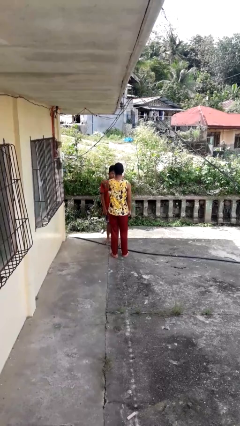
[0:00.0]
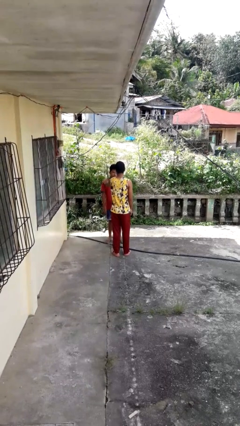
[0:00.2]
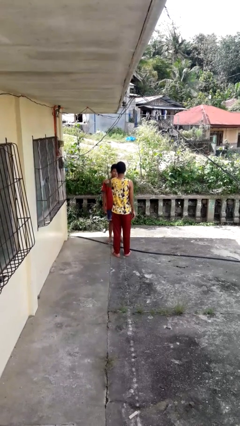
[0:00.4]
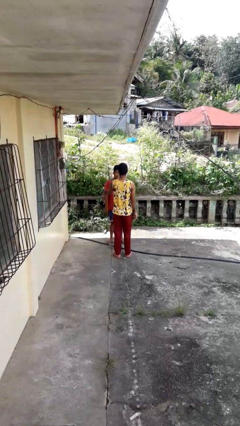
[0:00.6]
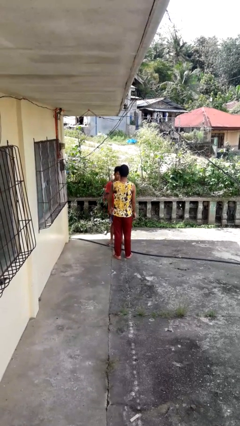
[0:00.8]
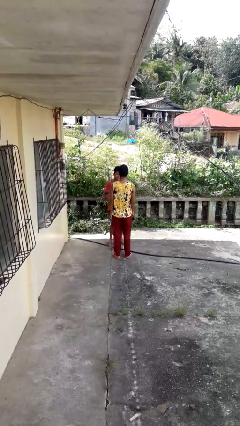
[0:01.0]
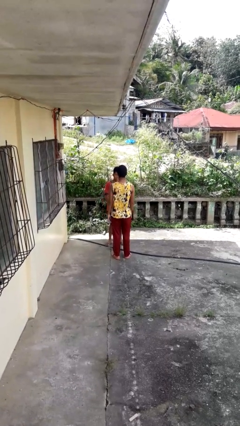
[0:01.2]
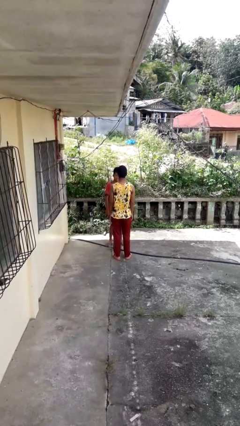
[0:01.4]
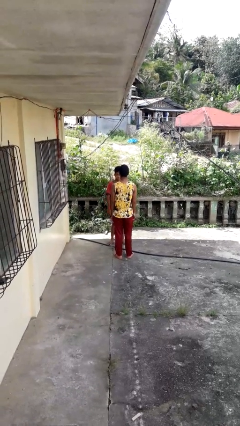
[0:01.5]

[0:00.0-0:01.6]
person shoves person

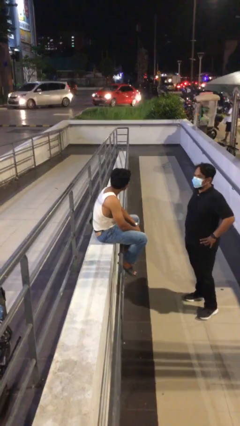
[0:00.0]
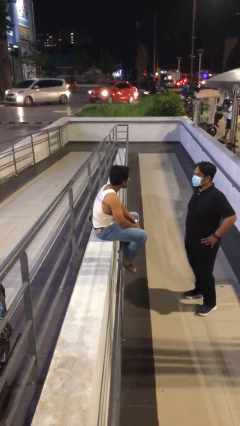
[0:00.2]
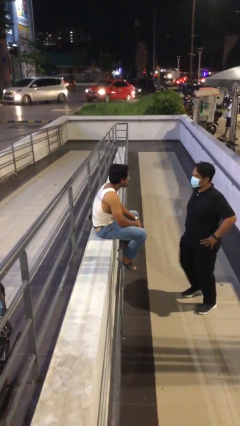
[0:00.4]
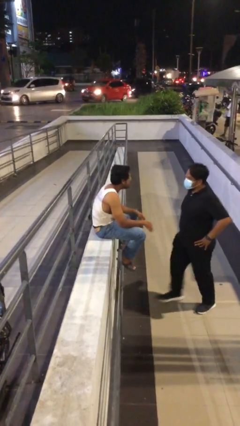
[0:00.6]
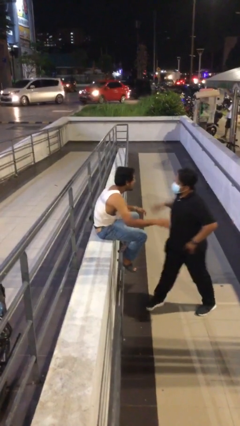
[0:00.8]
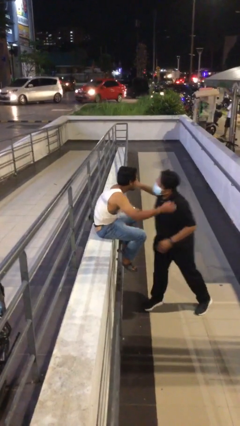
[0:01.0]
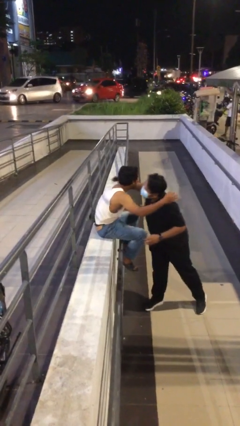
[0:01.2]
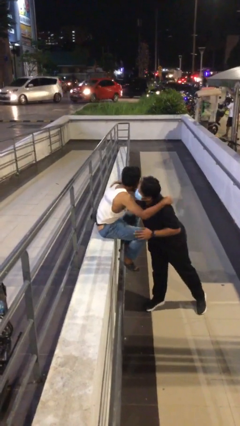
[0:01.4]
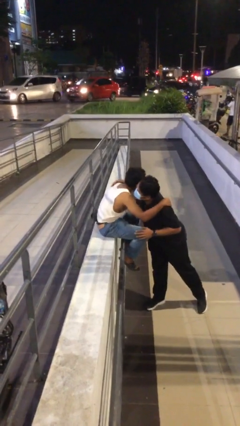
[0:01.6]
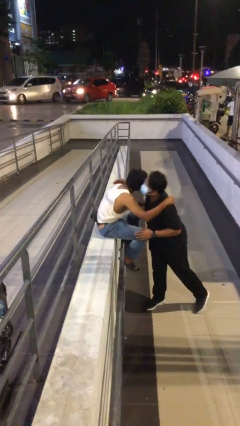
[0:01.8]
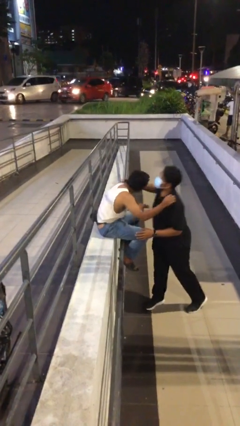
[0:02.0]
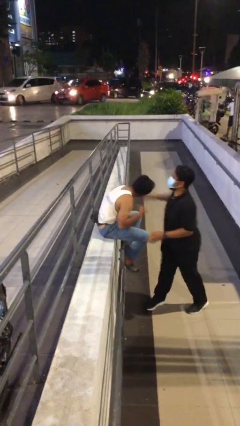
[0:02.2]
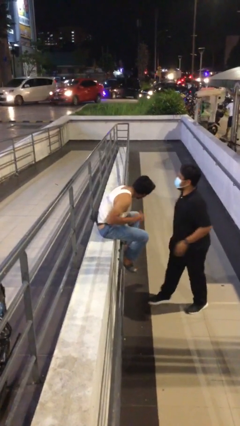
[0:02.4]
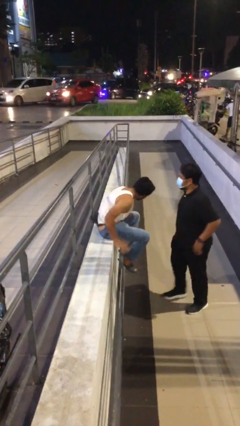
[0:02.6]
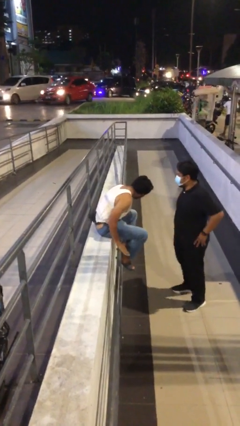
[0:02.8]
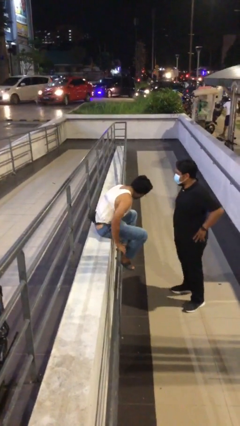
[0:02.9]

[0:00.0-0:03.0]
person embraces person

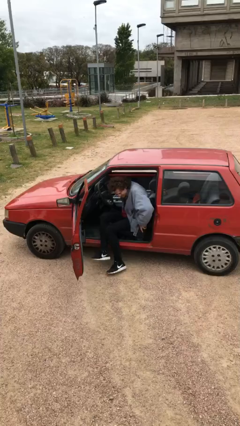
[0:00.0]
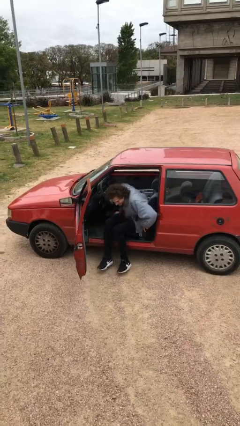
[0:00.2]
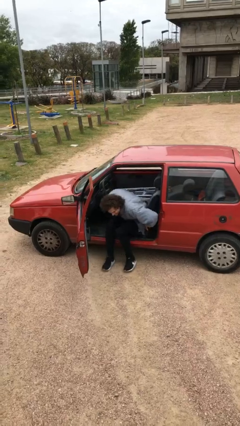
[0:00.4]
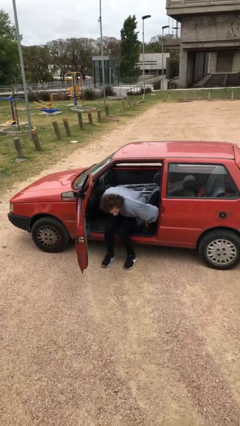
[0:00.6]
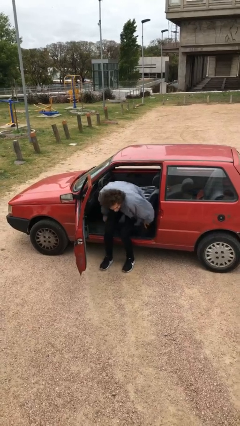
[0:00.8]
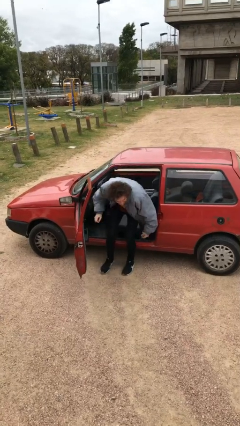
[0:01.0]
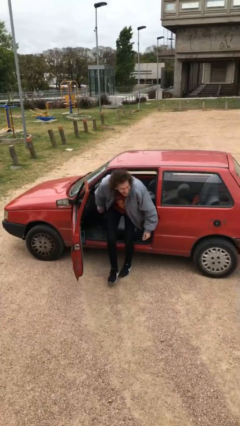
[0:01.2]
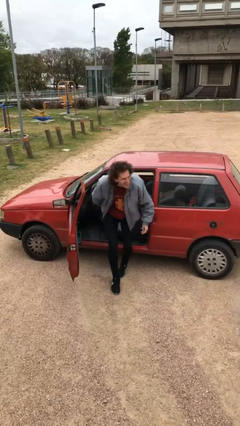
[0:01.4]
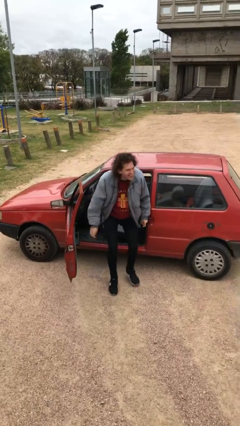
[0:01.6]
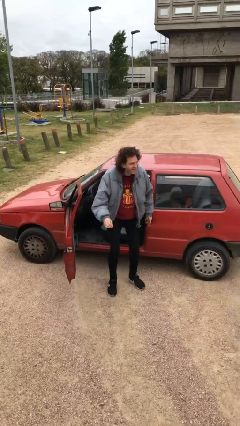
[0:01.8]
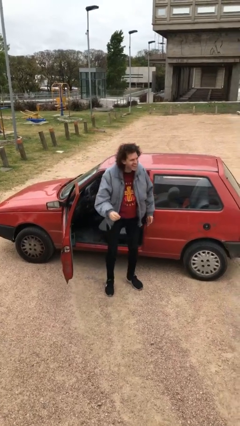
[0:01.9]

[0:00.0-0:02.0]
person exits car

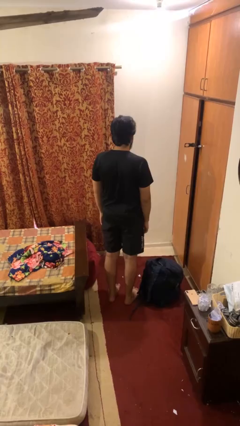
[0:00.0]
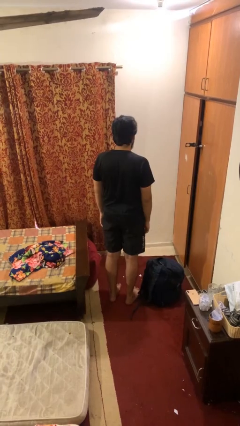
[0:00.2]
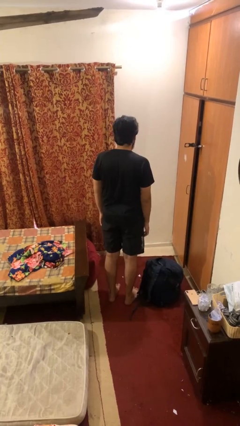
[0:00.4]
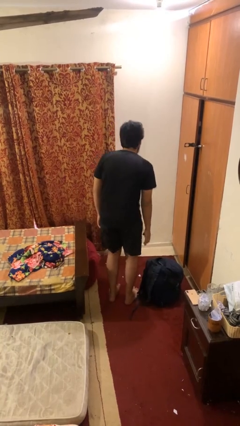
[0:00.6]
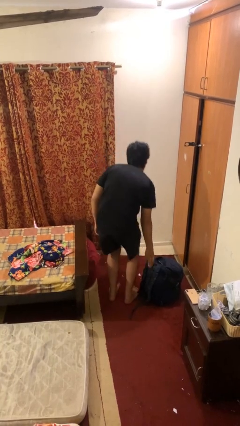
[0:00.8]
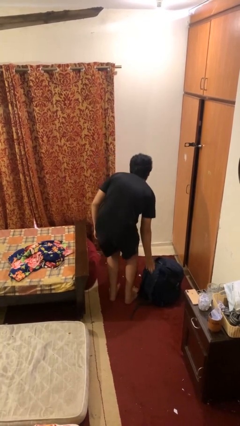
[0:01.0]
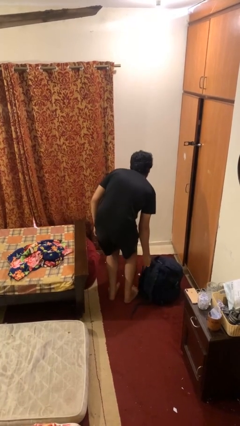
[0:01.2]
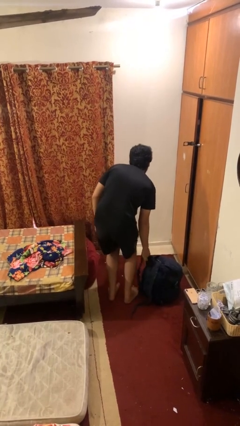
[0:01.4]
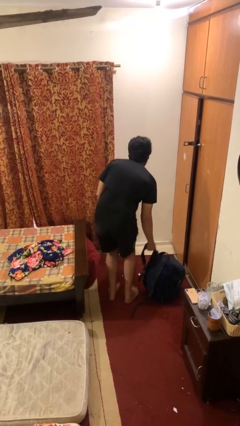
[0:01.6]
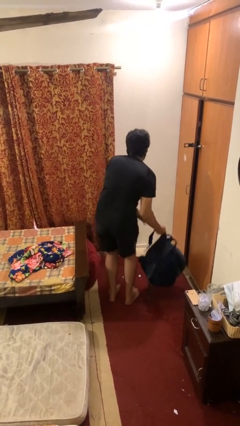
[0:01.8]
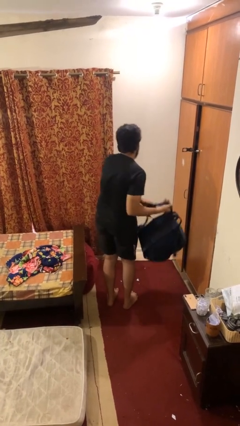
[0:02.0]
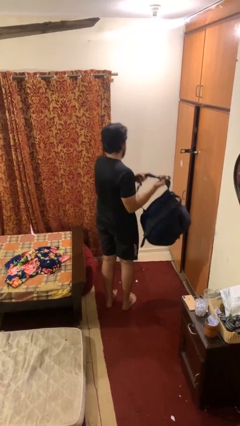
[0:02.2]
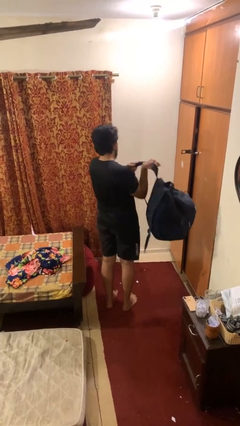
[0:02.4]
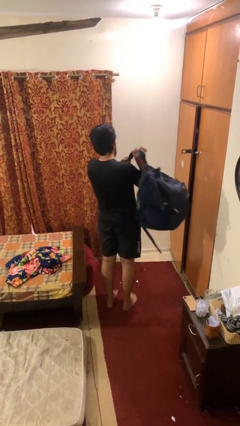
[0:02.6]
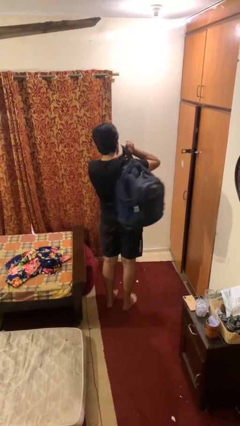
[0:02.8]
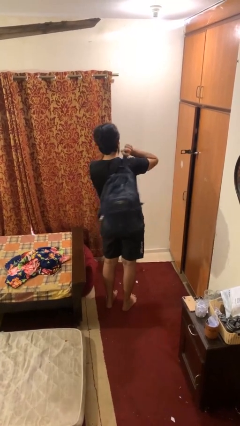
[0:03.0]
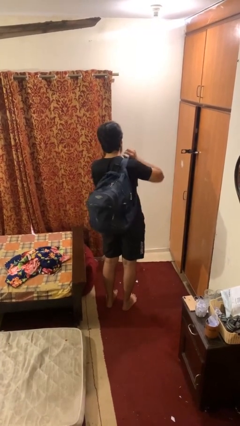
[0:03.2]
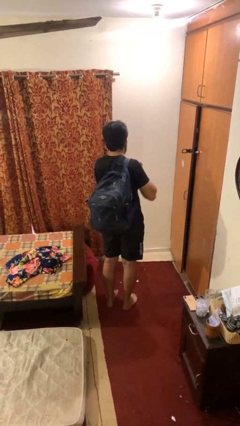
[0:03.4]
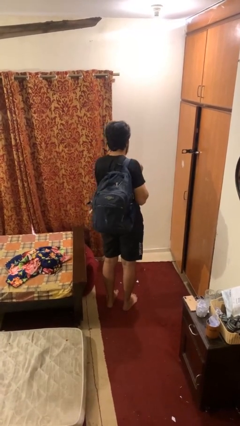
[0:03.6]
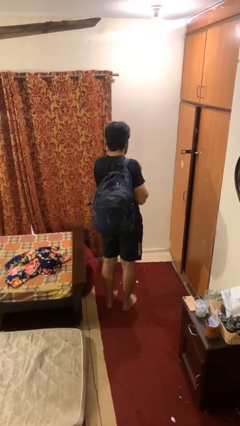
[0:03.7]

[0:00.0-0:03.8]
person puts on backpack

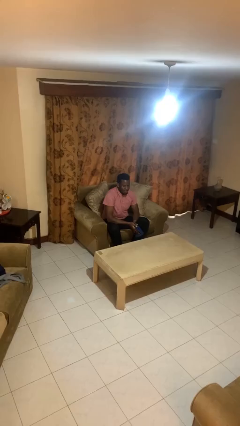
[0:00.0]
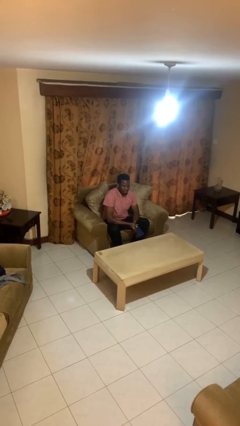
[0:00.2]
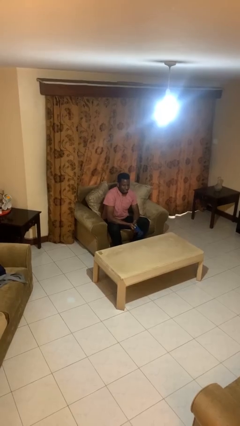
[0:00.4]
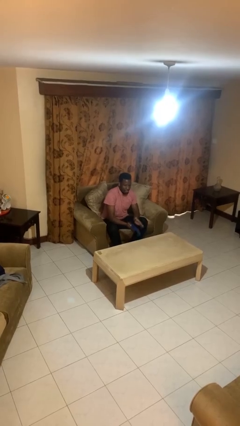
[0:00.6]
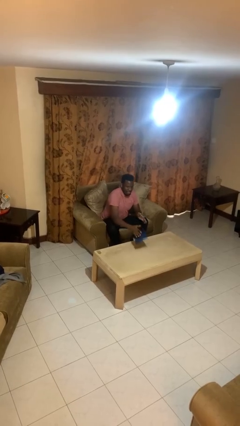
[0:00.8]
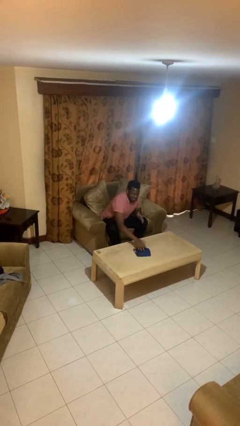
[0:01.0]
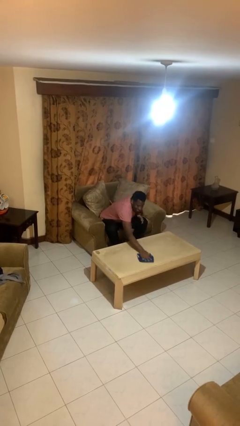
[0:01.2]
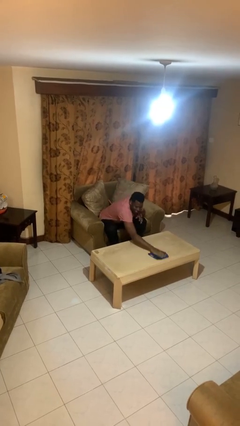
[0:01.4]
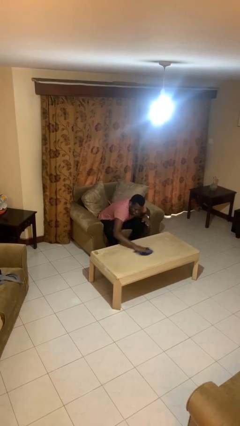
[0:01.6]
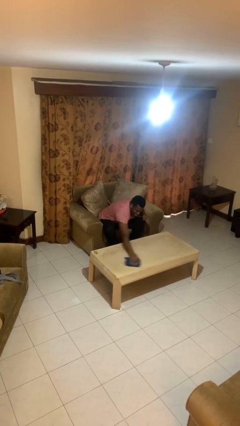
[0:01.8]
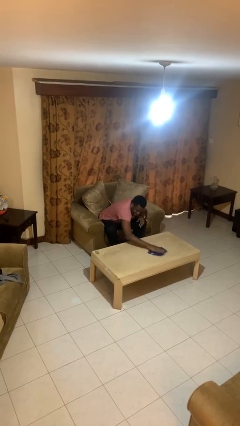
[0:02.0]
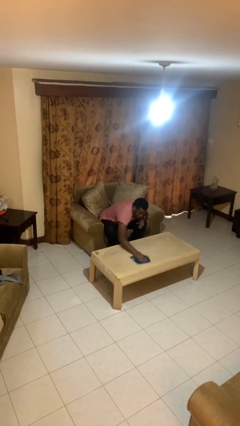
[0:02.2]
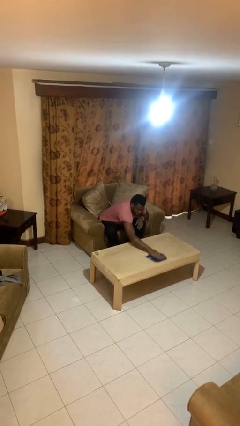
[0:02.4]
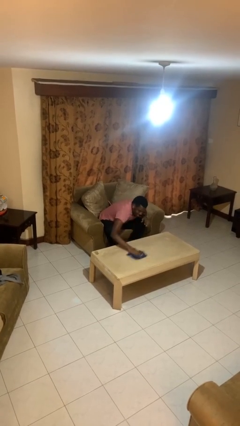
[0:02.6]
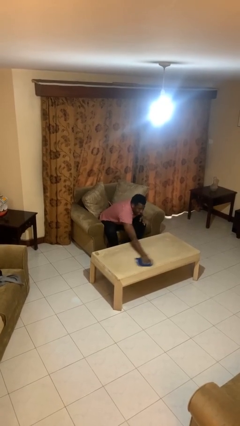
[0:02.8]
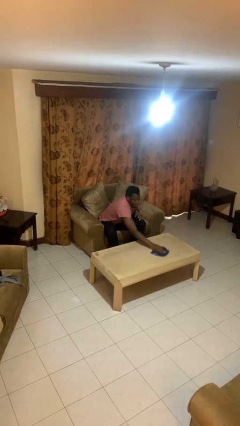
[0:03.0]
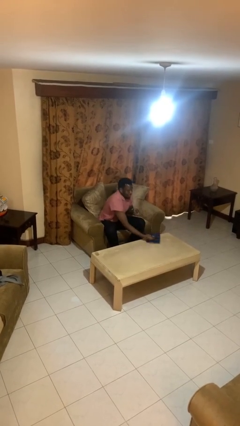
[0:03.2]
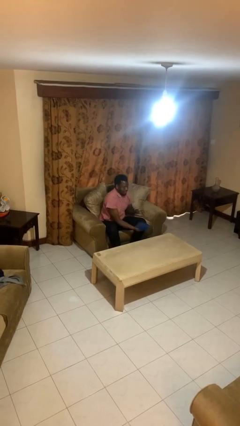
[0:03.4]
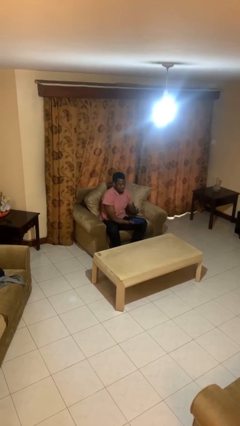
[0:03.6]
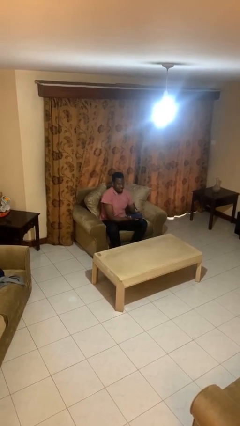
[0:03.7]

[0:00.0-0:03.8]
person cleans table with rag

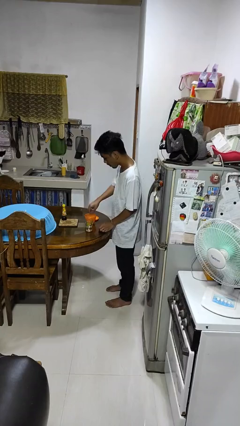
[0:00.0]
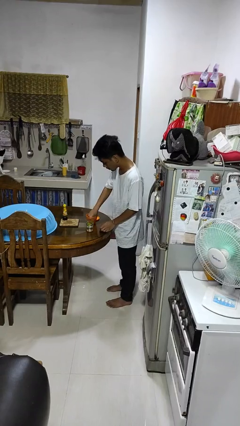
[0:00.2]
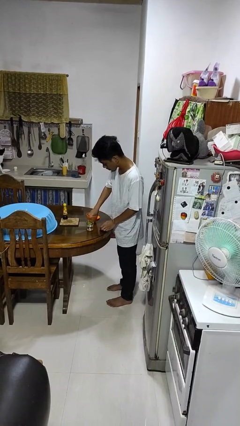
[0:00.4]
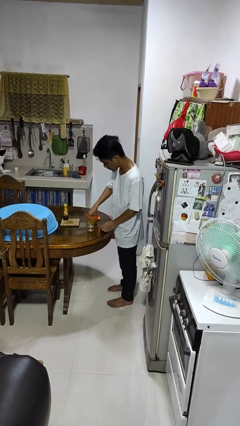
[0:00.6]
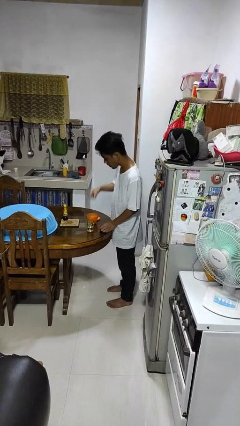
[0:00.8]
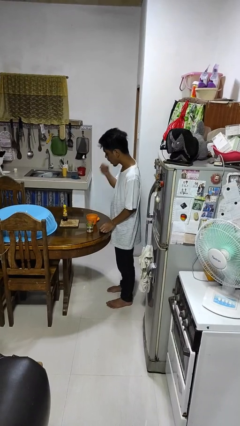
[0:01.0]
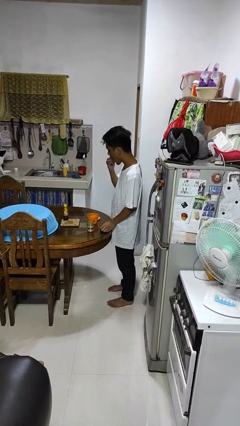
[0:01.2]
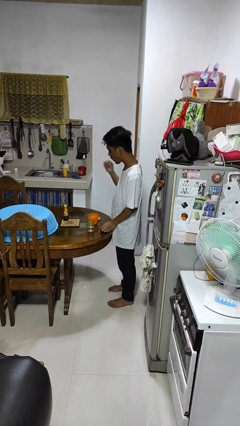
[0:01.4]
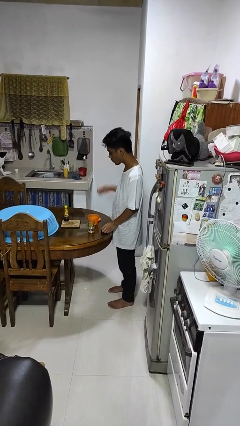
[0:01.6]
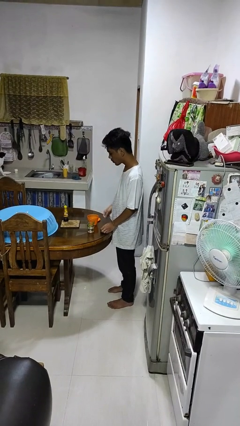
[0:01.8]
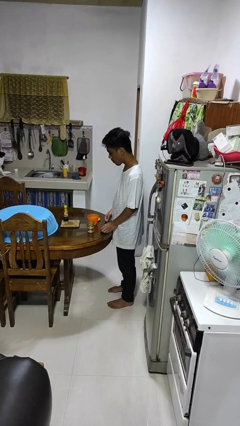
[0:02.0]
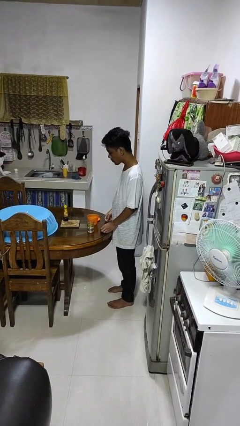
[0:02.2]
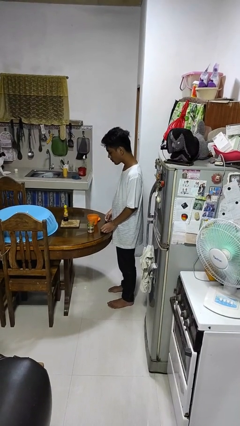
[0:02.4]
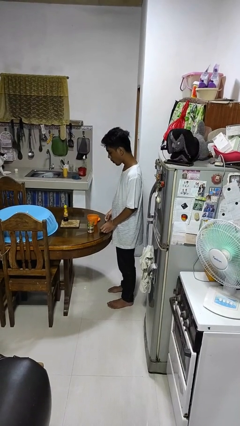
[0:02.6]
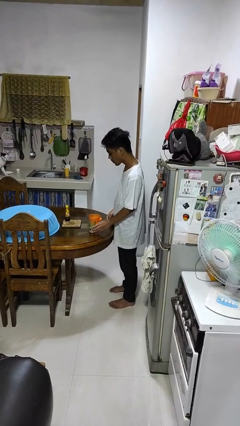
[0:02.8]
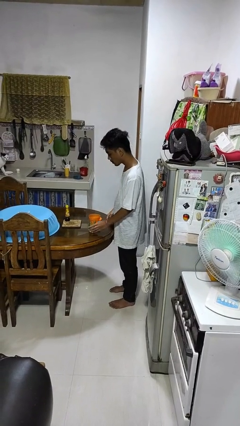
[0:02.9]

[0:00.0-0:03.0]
person takes medicine pills

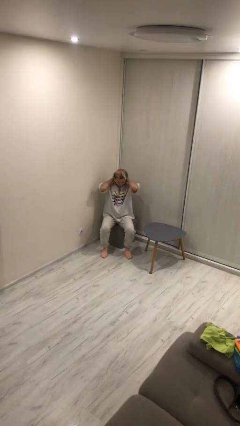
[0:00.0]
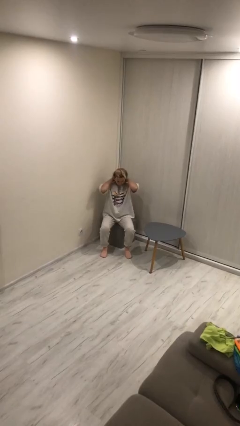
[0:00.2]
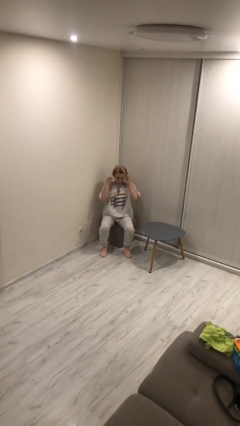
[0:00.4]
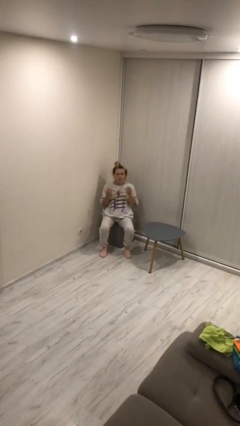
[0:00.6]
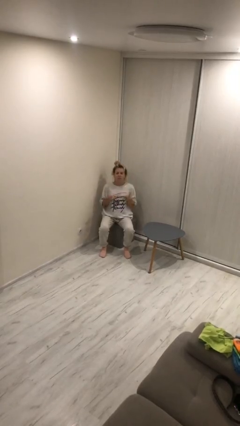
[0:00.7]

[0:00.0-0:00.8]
person takes off necklace
